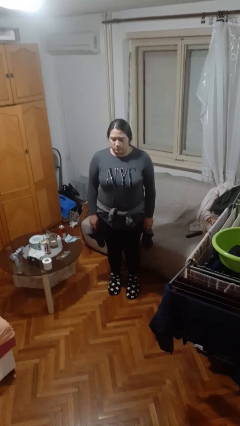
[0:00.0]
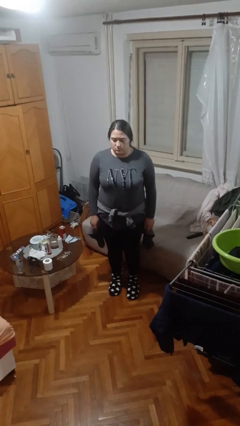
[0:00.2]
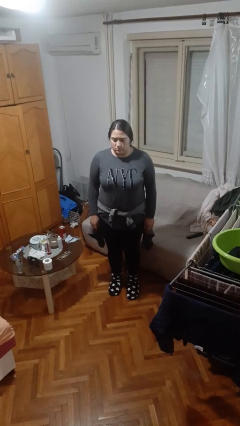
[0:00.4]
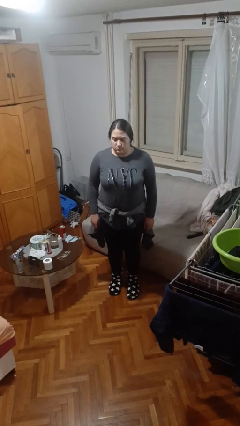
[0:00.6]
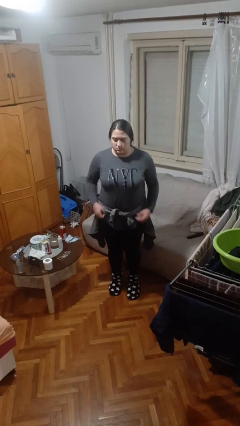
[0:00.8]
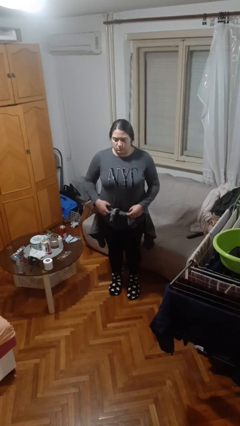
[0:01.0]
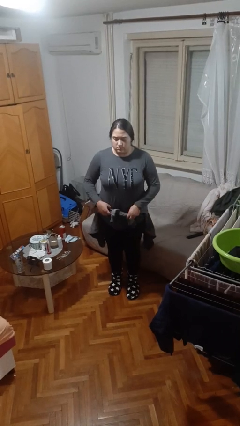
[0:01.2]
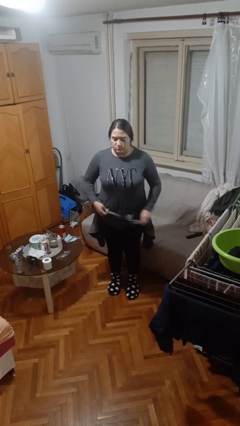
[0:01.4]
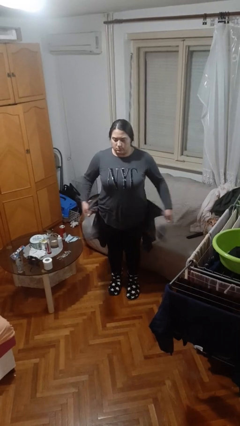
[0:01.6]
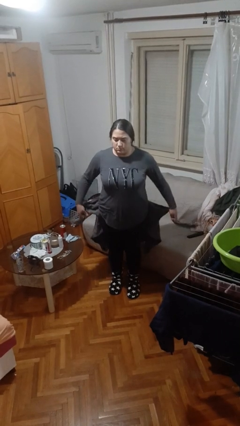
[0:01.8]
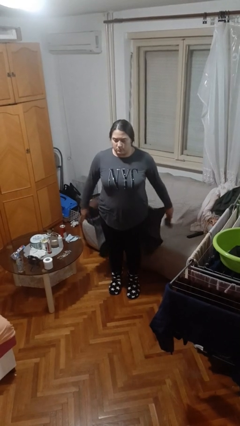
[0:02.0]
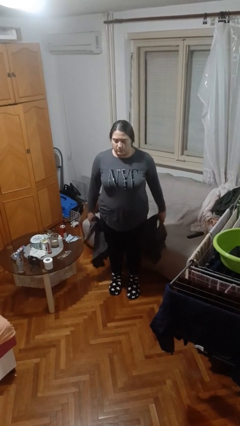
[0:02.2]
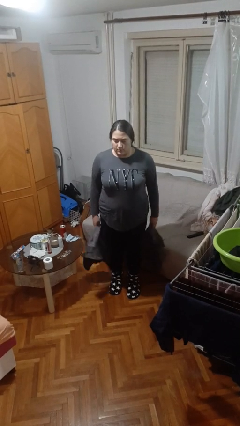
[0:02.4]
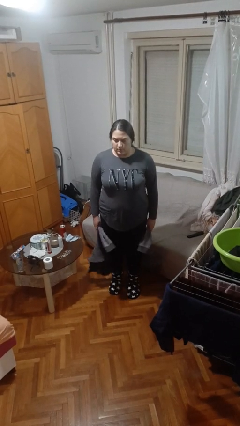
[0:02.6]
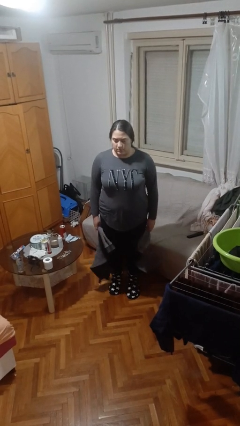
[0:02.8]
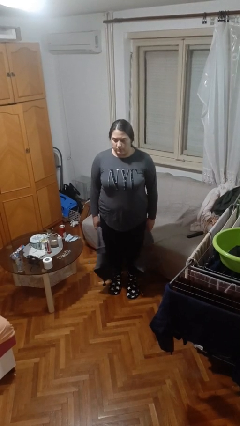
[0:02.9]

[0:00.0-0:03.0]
person unties jacket around waist

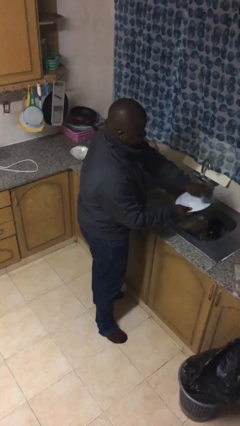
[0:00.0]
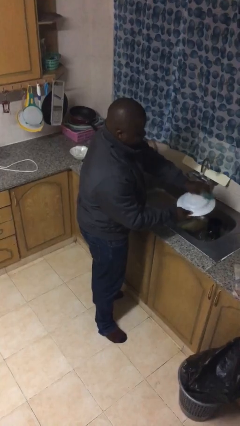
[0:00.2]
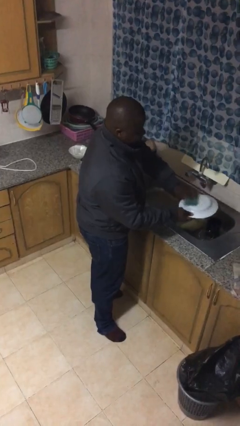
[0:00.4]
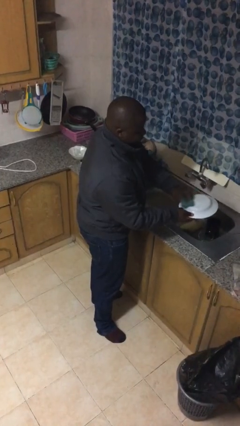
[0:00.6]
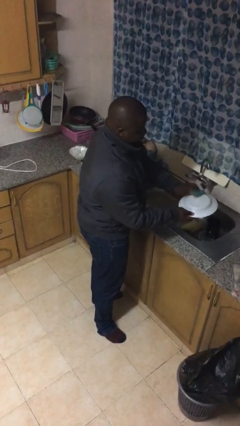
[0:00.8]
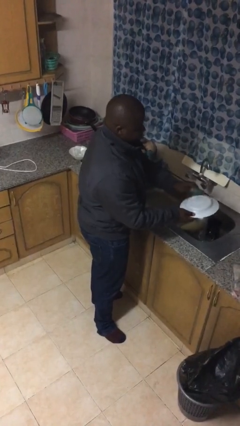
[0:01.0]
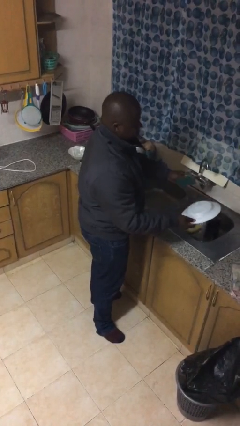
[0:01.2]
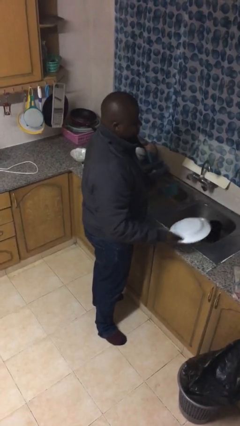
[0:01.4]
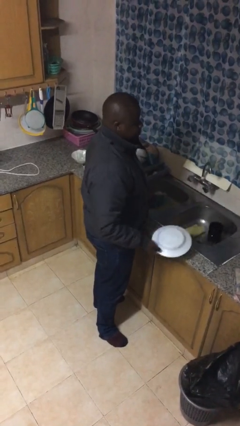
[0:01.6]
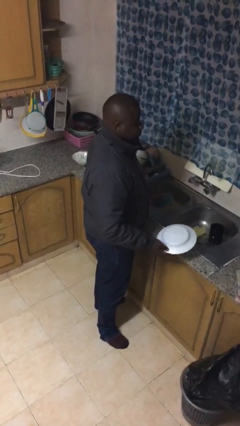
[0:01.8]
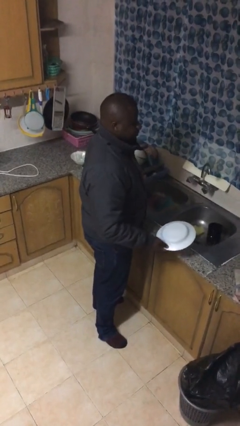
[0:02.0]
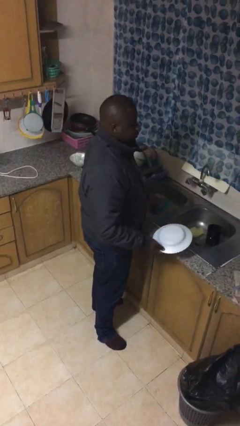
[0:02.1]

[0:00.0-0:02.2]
person washes dish

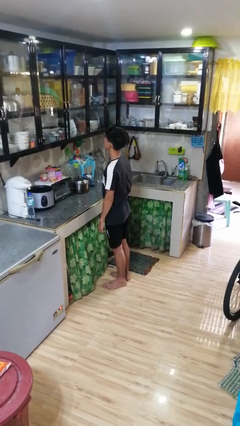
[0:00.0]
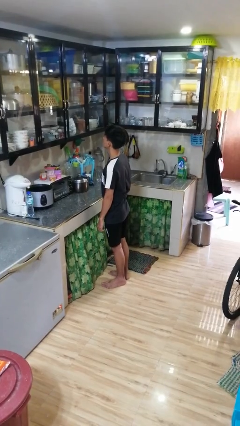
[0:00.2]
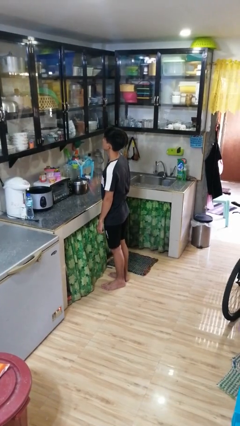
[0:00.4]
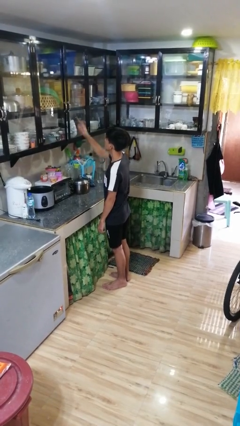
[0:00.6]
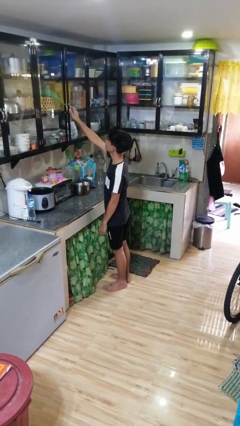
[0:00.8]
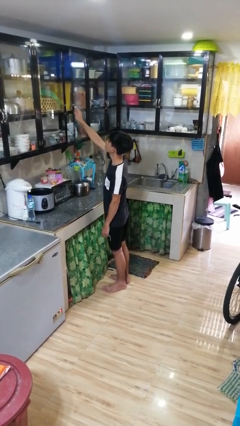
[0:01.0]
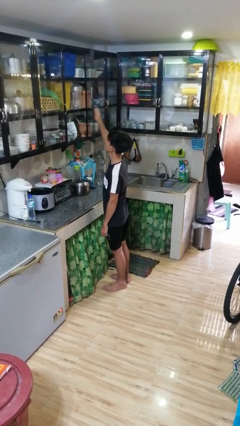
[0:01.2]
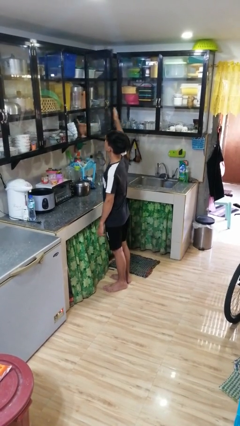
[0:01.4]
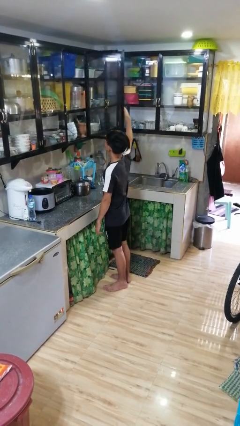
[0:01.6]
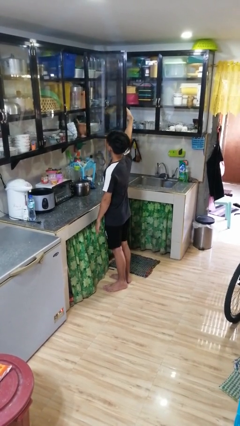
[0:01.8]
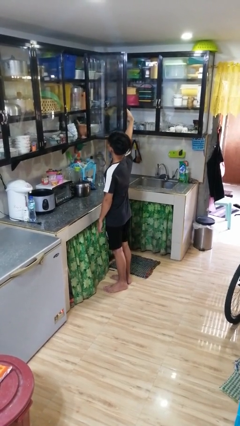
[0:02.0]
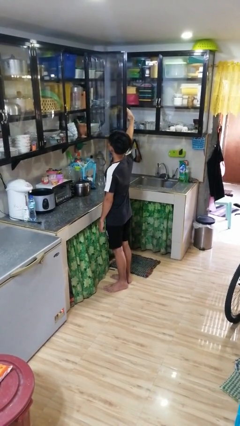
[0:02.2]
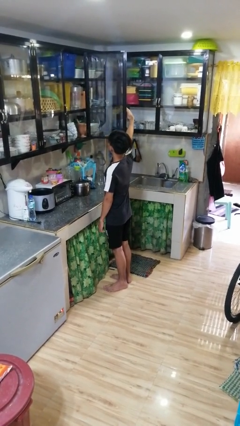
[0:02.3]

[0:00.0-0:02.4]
person opens cabinet

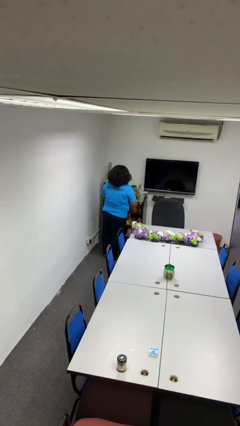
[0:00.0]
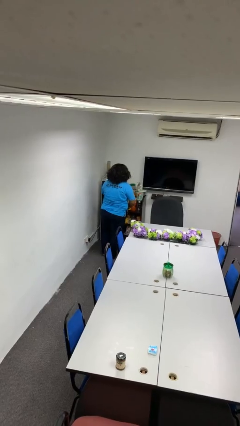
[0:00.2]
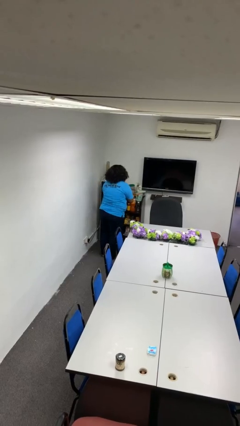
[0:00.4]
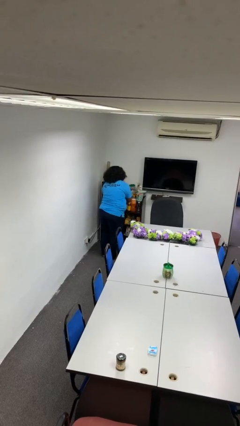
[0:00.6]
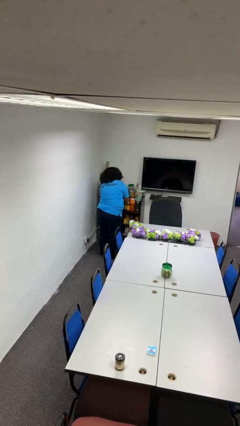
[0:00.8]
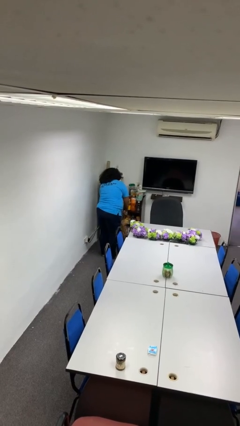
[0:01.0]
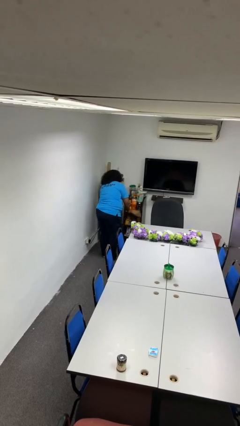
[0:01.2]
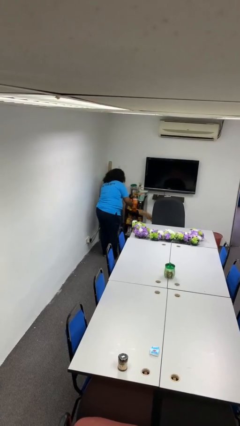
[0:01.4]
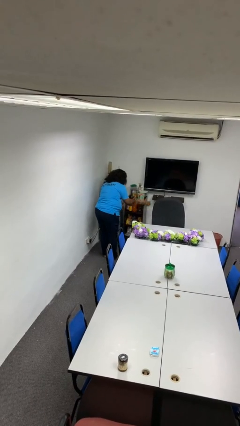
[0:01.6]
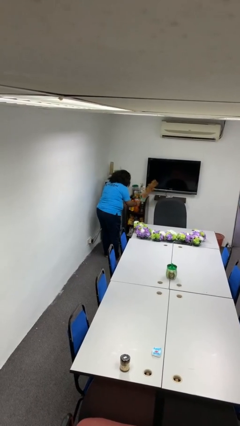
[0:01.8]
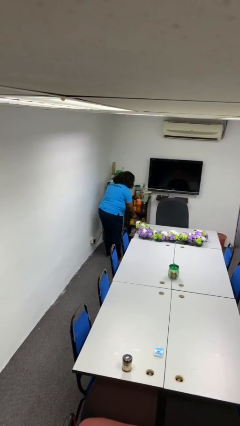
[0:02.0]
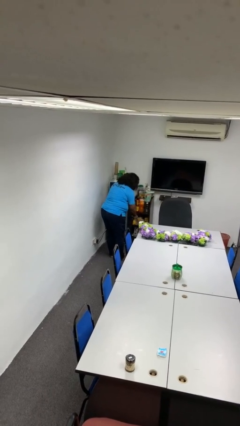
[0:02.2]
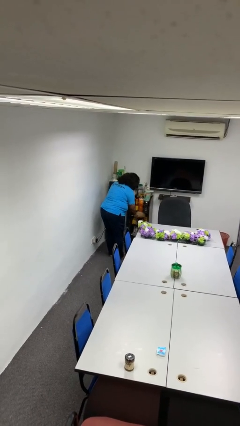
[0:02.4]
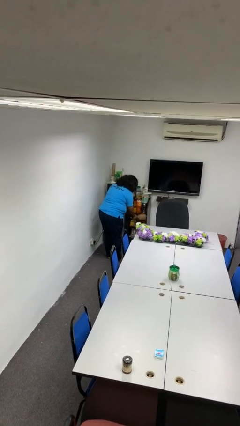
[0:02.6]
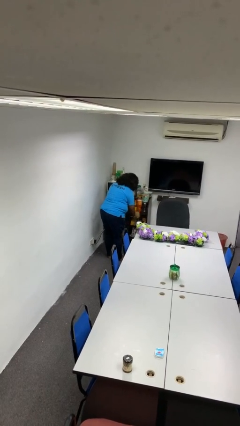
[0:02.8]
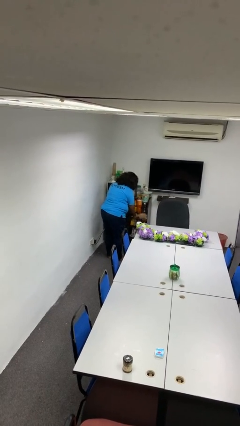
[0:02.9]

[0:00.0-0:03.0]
person dusts furniture

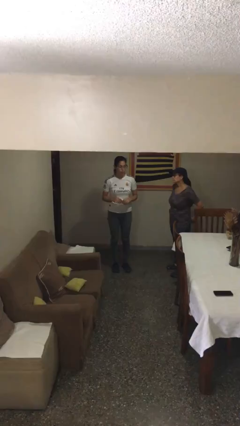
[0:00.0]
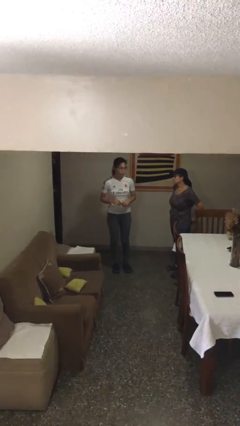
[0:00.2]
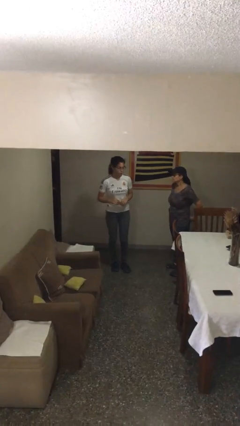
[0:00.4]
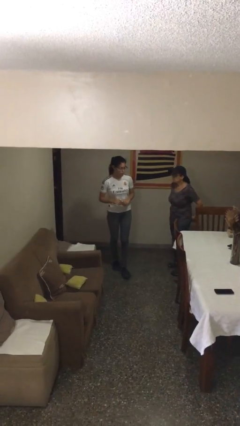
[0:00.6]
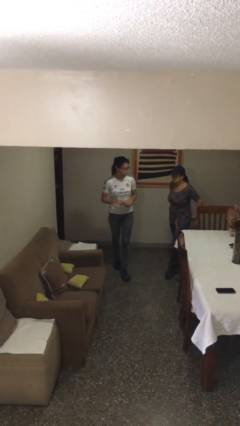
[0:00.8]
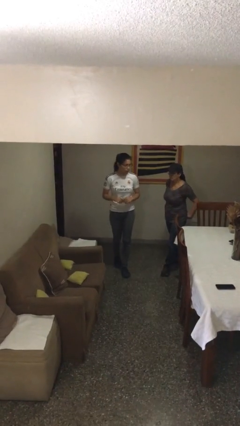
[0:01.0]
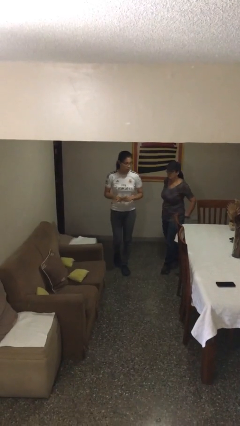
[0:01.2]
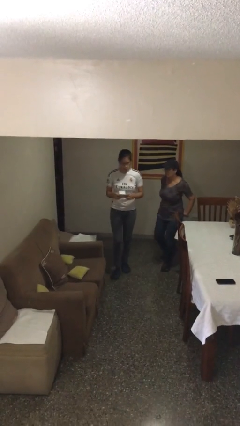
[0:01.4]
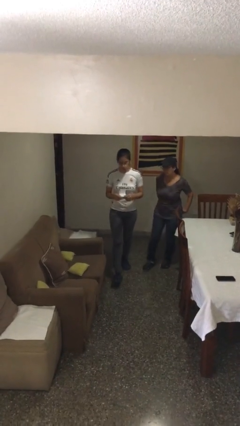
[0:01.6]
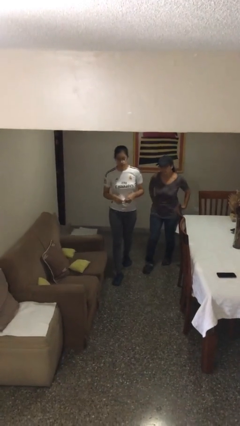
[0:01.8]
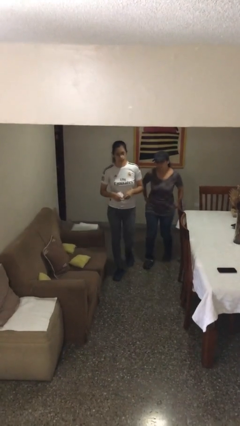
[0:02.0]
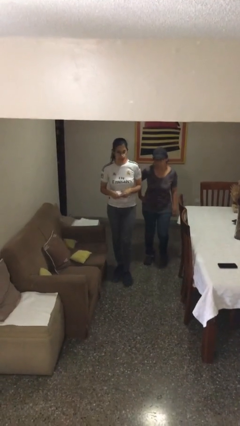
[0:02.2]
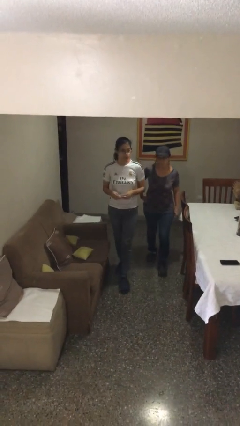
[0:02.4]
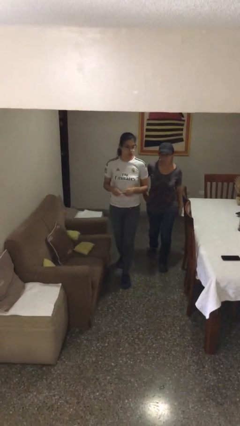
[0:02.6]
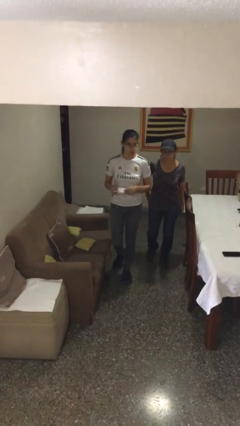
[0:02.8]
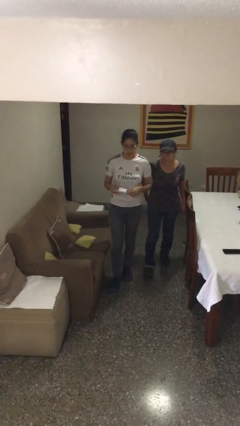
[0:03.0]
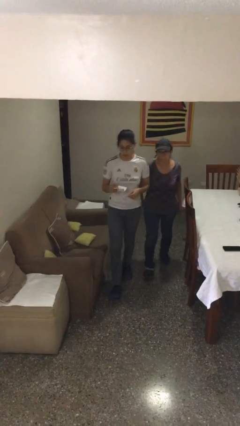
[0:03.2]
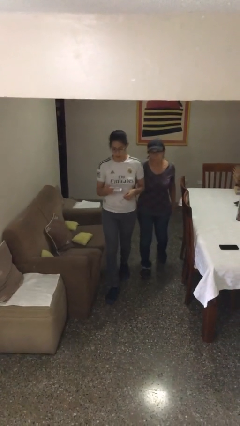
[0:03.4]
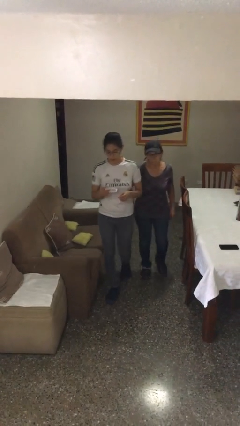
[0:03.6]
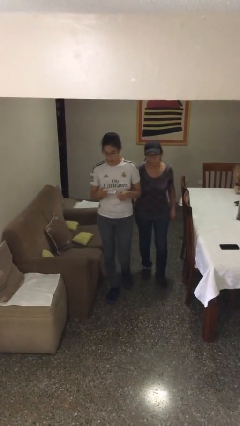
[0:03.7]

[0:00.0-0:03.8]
person talks to person

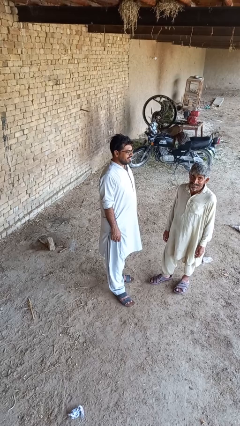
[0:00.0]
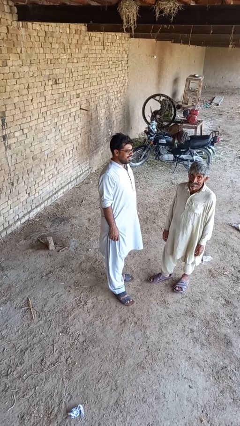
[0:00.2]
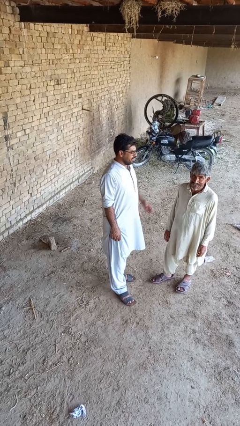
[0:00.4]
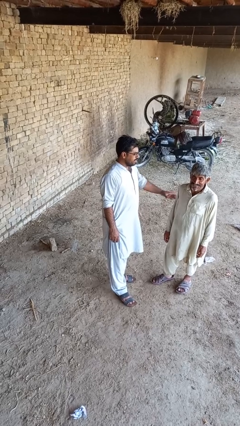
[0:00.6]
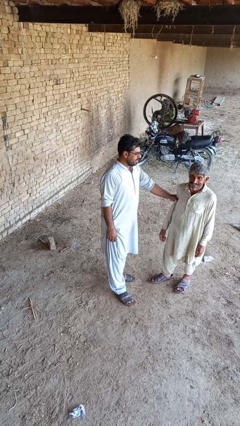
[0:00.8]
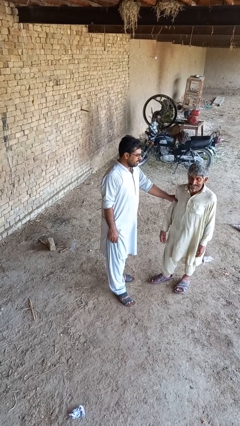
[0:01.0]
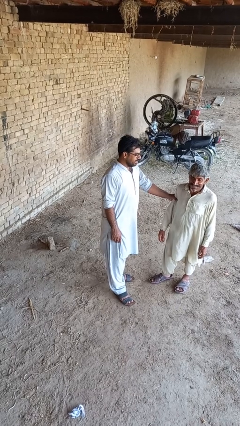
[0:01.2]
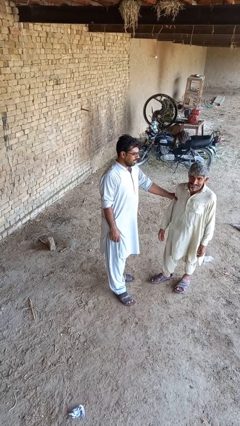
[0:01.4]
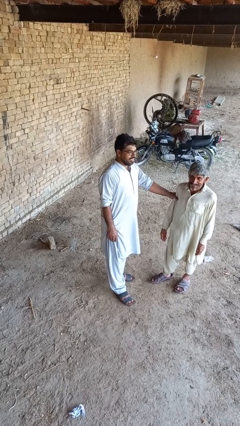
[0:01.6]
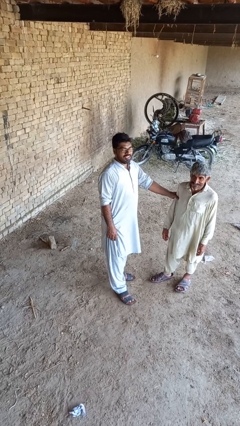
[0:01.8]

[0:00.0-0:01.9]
person grabs person by bicep

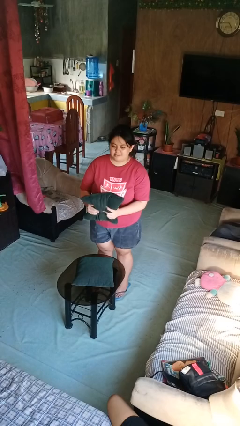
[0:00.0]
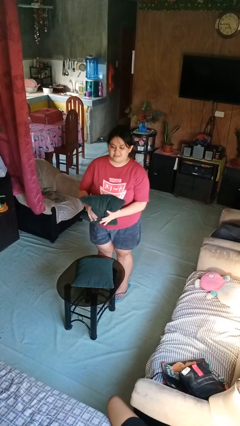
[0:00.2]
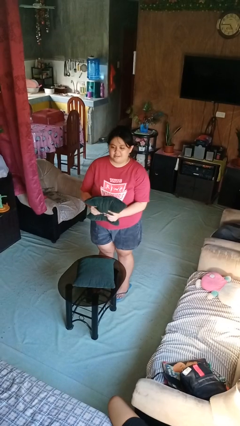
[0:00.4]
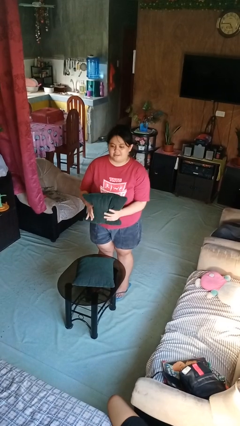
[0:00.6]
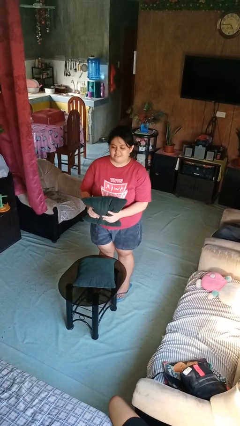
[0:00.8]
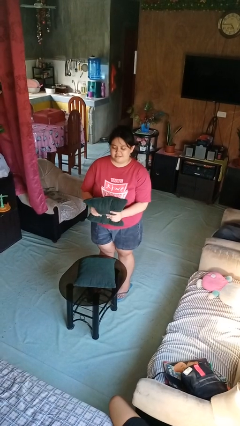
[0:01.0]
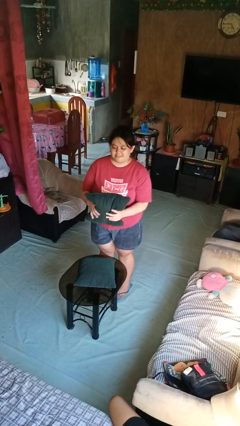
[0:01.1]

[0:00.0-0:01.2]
person squeezes object
